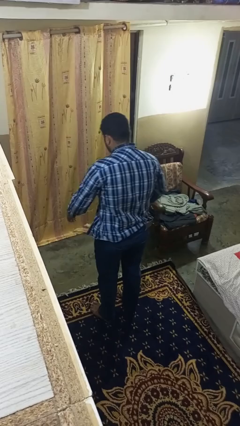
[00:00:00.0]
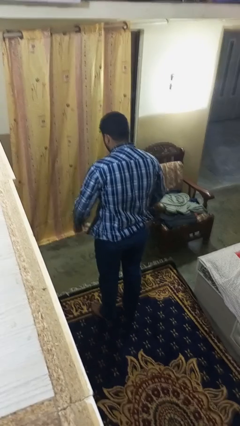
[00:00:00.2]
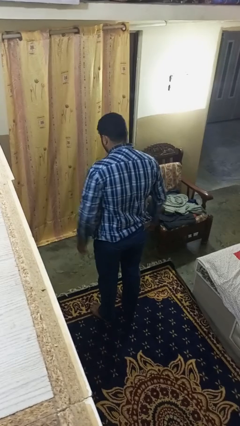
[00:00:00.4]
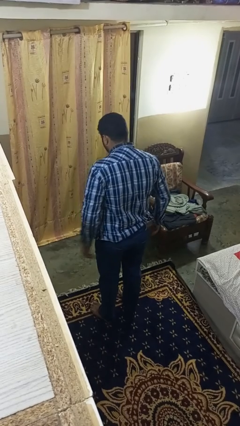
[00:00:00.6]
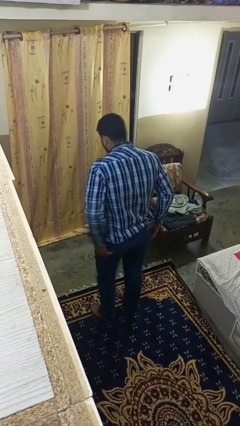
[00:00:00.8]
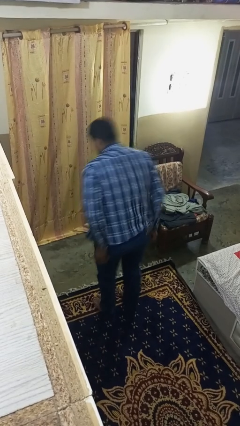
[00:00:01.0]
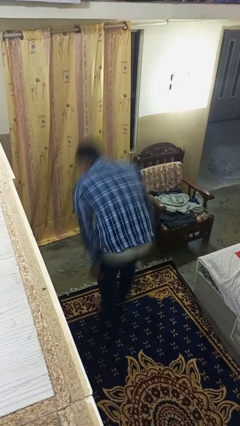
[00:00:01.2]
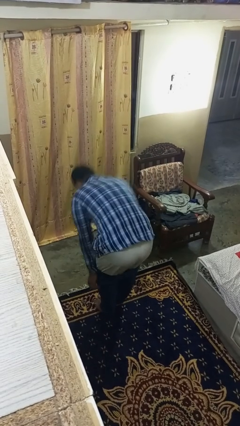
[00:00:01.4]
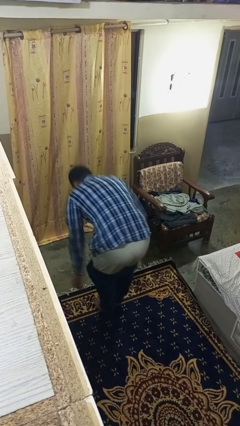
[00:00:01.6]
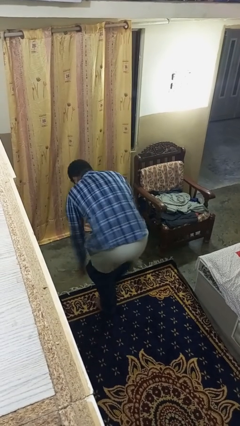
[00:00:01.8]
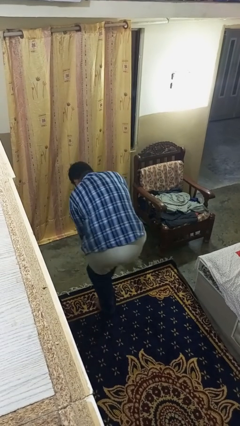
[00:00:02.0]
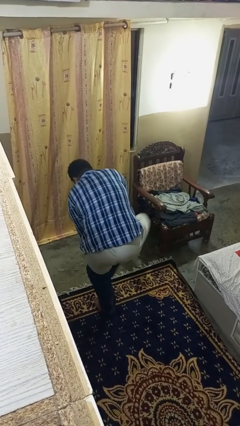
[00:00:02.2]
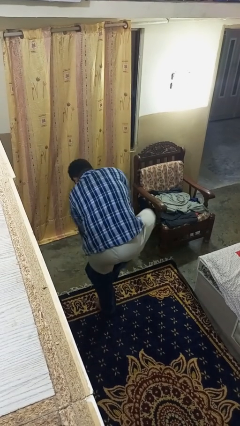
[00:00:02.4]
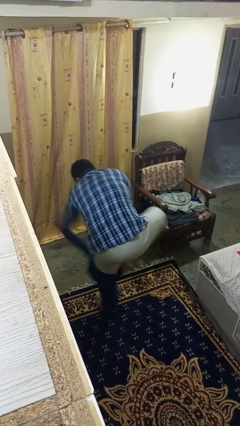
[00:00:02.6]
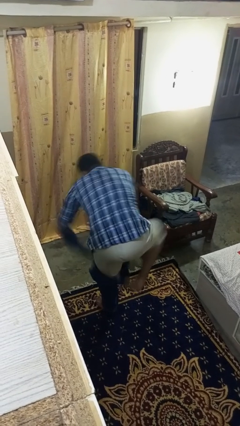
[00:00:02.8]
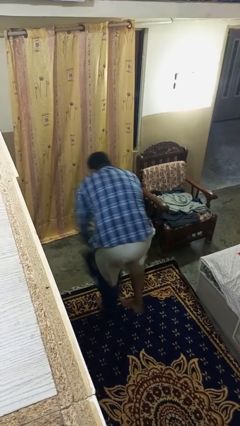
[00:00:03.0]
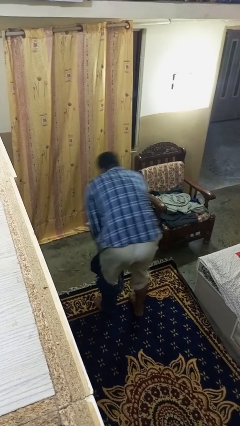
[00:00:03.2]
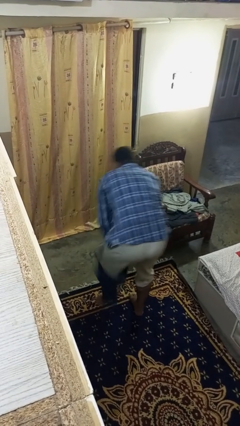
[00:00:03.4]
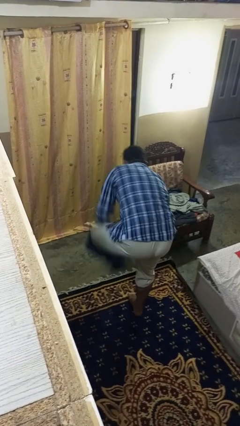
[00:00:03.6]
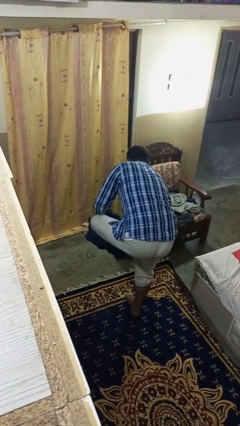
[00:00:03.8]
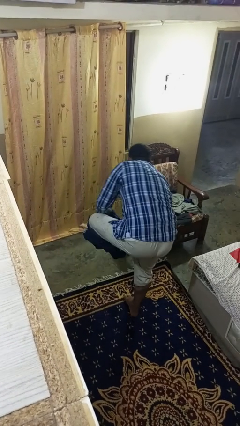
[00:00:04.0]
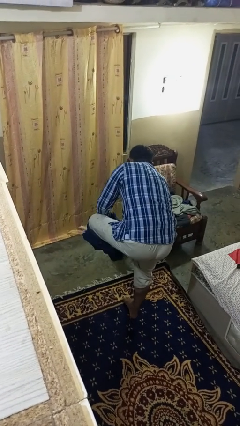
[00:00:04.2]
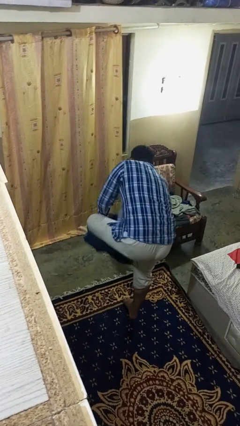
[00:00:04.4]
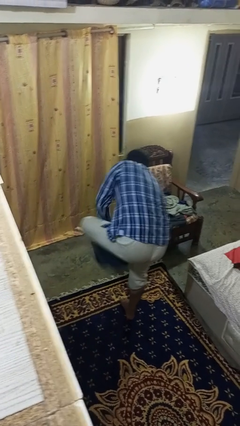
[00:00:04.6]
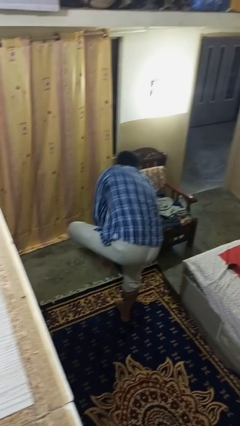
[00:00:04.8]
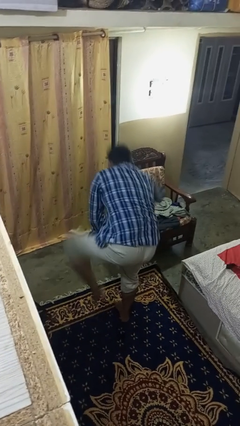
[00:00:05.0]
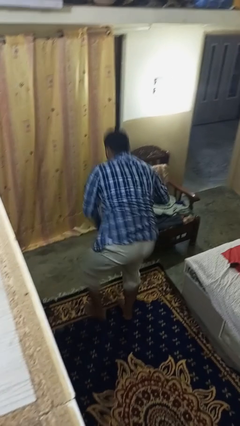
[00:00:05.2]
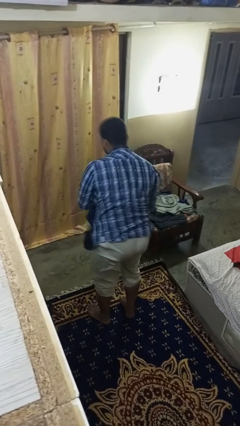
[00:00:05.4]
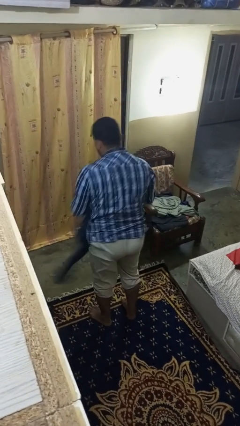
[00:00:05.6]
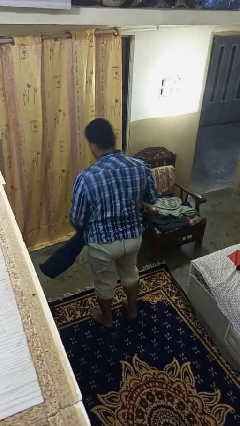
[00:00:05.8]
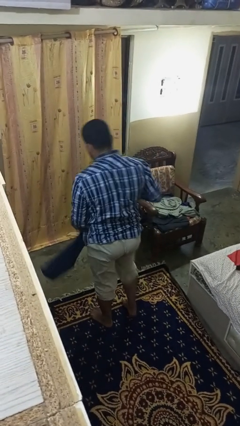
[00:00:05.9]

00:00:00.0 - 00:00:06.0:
person takes off pants

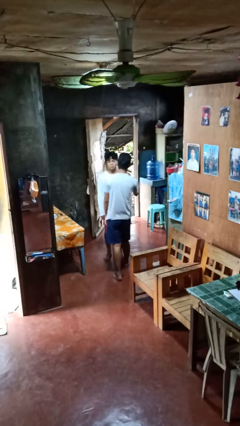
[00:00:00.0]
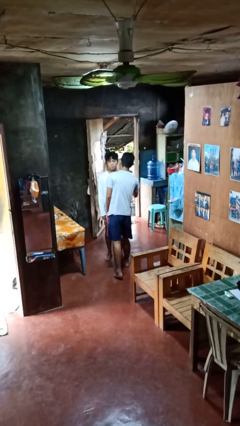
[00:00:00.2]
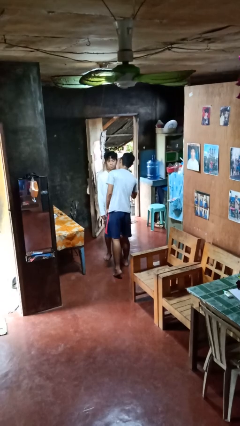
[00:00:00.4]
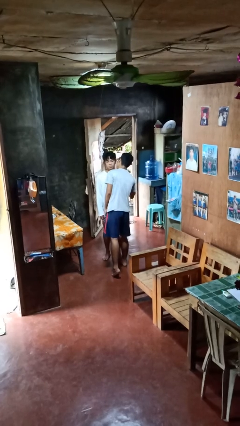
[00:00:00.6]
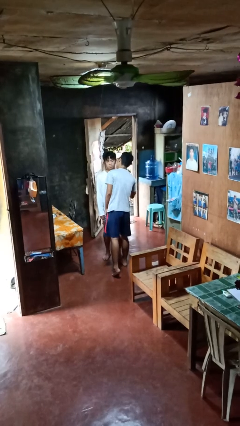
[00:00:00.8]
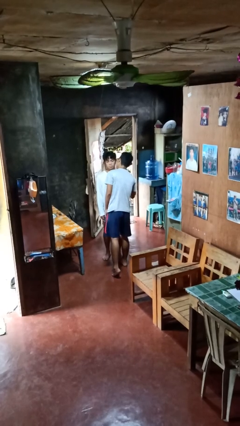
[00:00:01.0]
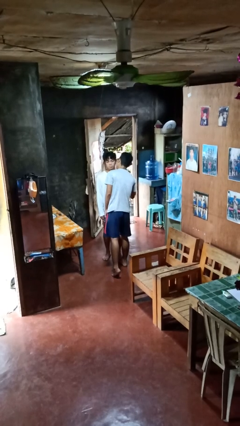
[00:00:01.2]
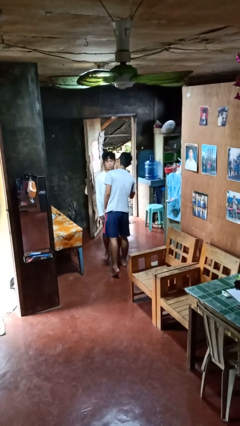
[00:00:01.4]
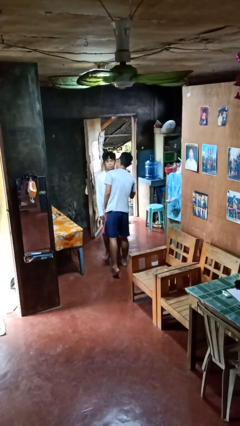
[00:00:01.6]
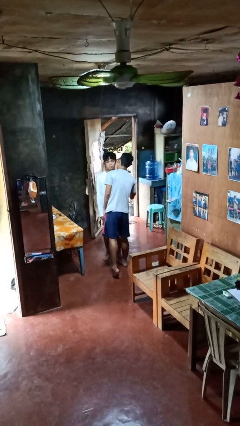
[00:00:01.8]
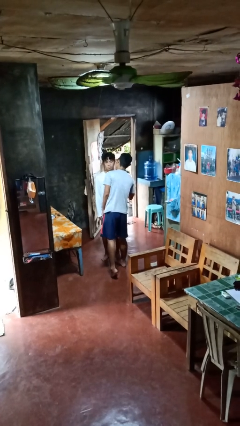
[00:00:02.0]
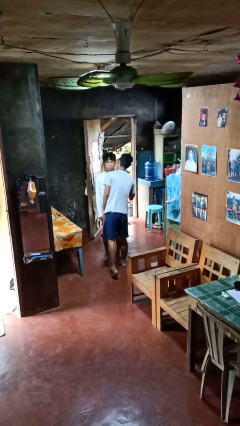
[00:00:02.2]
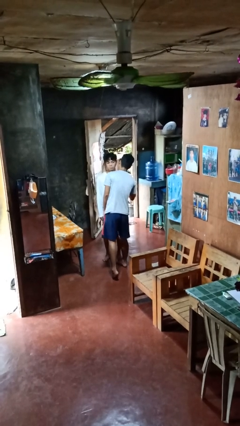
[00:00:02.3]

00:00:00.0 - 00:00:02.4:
person kisses cheek of person

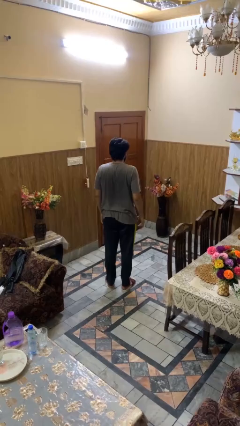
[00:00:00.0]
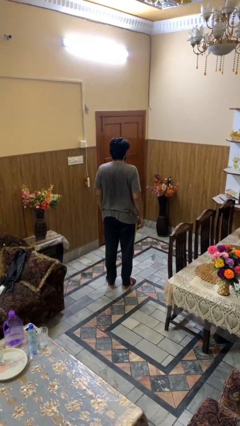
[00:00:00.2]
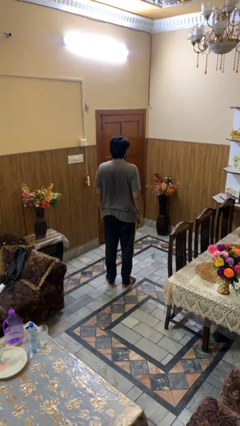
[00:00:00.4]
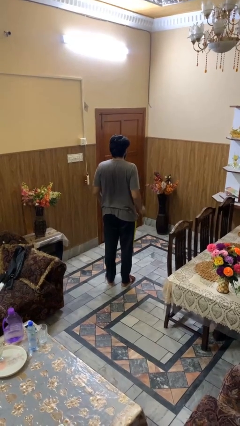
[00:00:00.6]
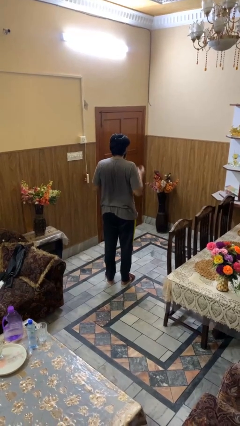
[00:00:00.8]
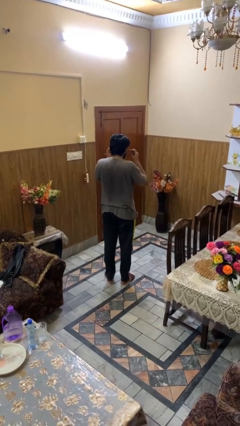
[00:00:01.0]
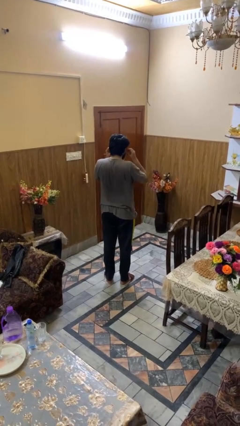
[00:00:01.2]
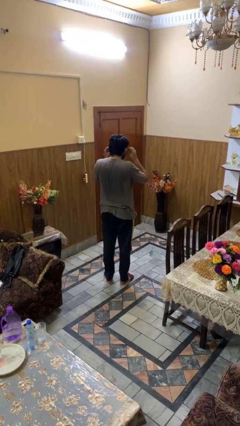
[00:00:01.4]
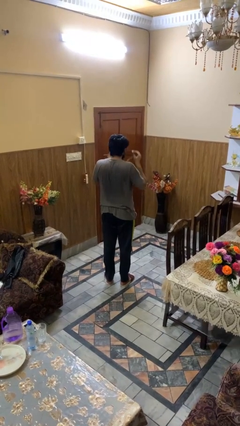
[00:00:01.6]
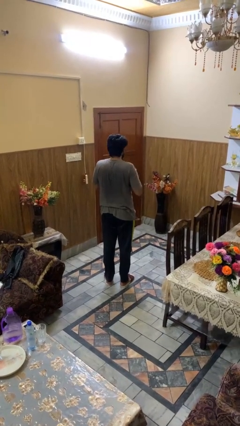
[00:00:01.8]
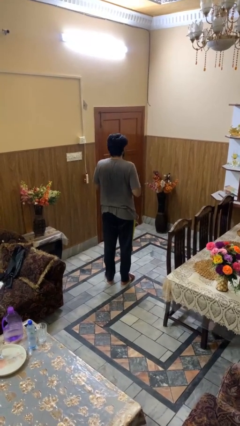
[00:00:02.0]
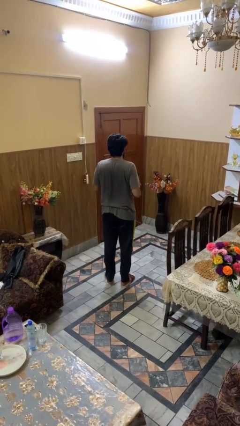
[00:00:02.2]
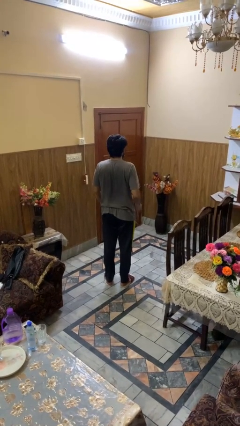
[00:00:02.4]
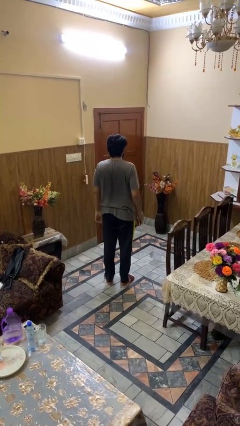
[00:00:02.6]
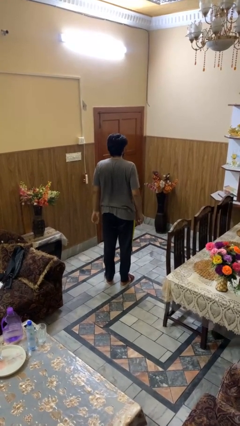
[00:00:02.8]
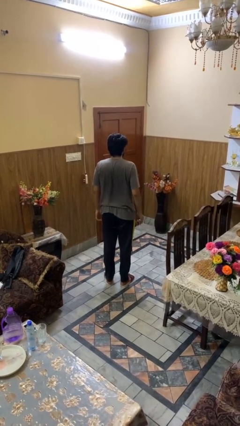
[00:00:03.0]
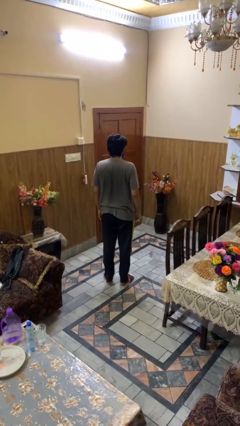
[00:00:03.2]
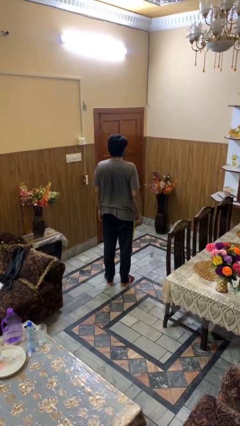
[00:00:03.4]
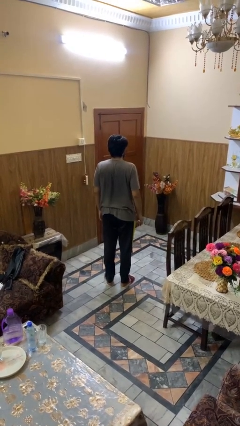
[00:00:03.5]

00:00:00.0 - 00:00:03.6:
person takes off headphones

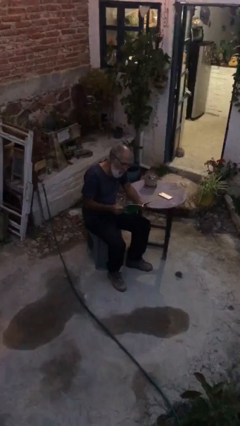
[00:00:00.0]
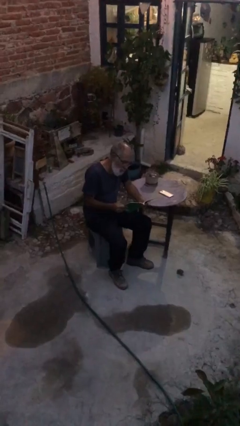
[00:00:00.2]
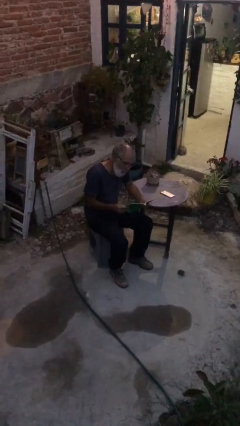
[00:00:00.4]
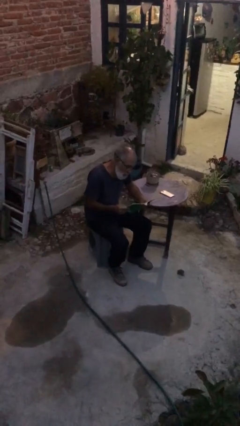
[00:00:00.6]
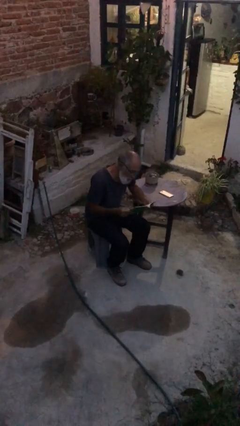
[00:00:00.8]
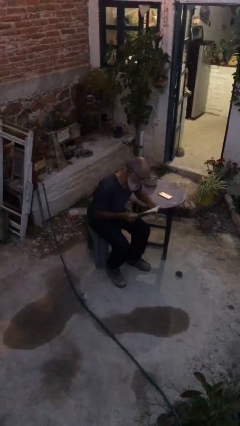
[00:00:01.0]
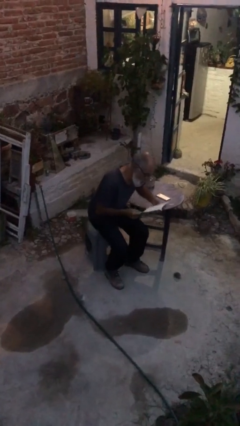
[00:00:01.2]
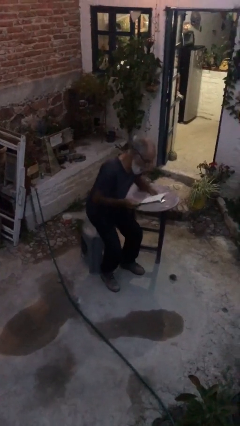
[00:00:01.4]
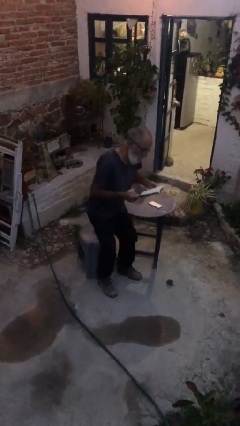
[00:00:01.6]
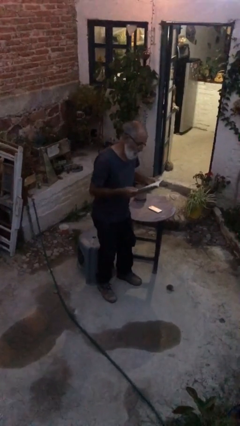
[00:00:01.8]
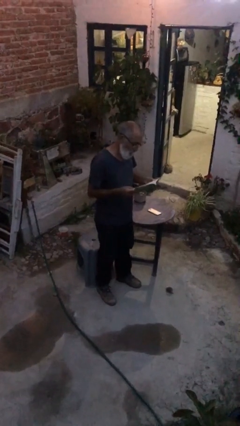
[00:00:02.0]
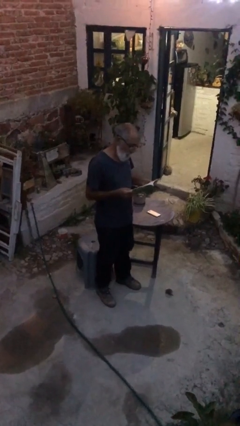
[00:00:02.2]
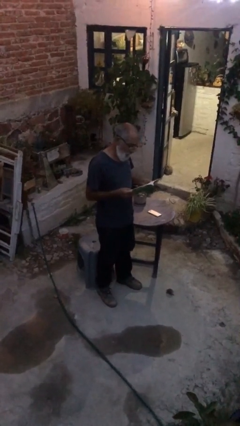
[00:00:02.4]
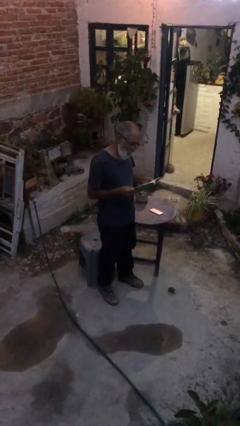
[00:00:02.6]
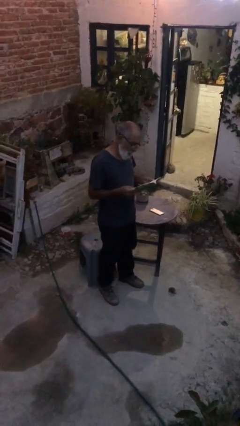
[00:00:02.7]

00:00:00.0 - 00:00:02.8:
person stands up

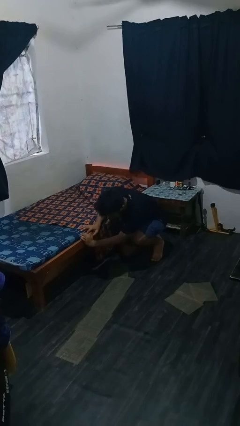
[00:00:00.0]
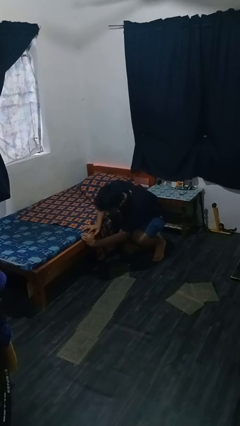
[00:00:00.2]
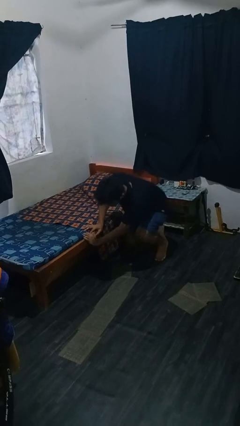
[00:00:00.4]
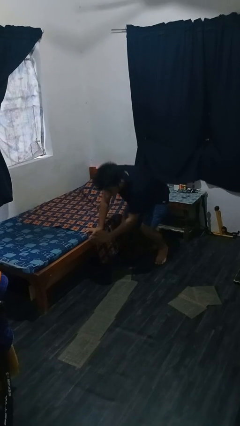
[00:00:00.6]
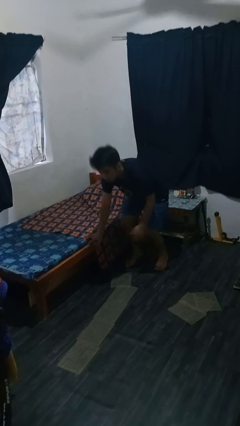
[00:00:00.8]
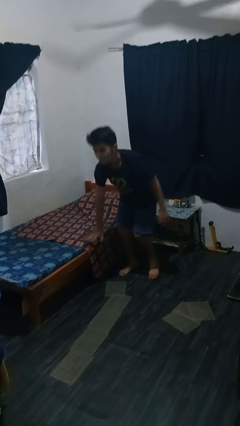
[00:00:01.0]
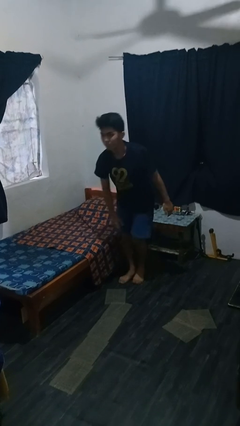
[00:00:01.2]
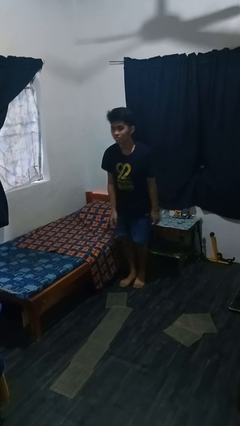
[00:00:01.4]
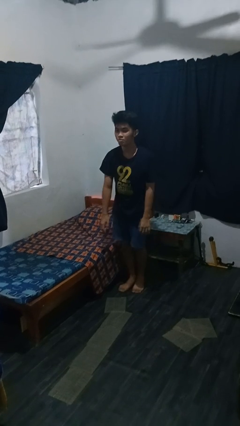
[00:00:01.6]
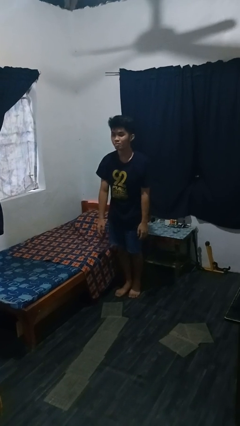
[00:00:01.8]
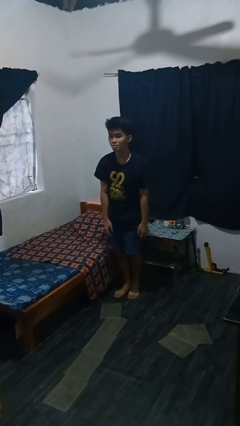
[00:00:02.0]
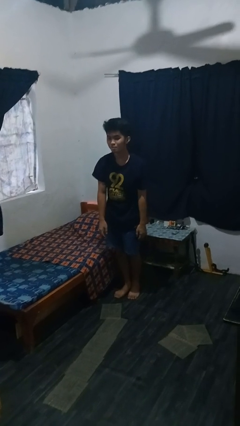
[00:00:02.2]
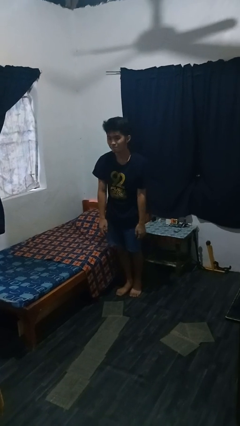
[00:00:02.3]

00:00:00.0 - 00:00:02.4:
person stands up from floor
